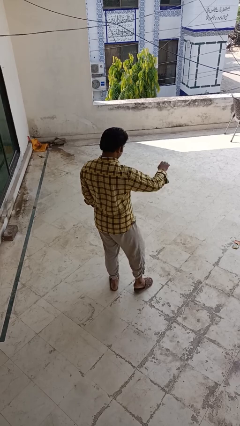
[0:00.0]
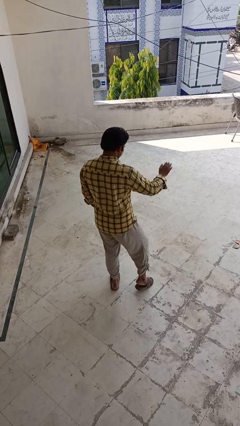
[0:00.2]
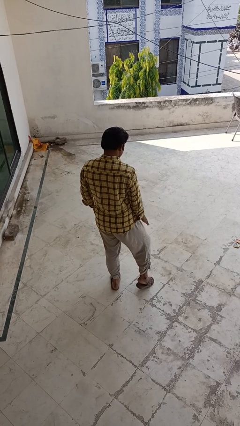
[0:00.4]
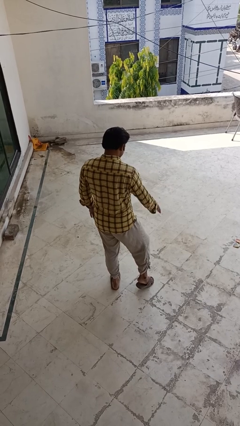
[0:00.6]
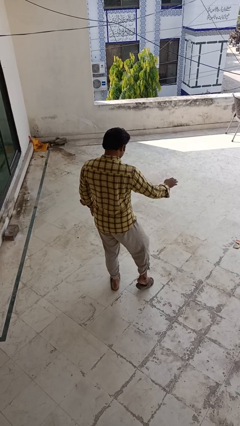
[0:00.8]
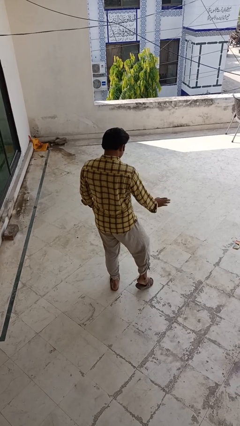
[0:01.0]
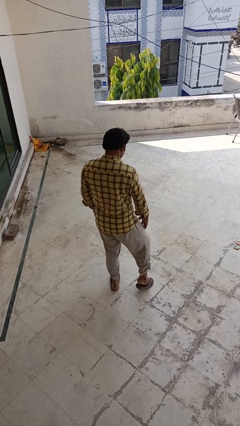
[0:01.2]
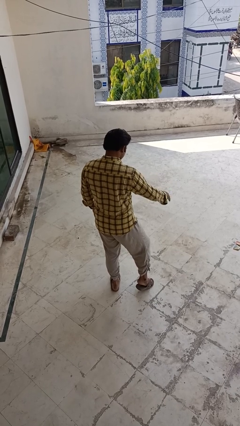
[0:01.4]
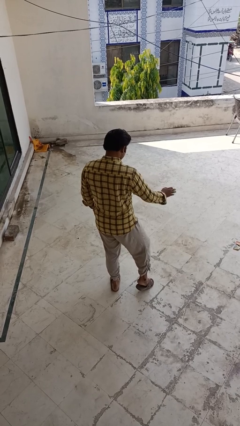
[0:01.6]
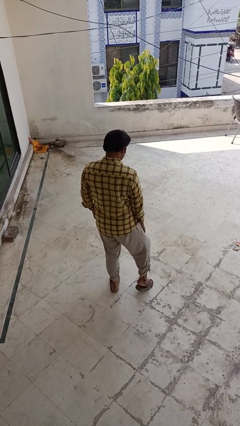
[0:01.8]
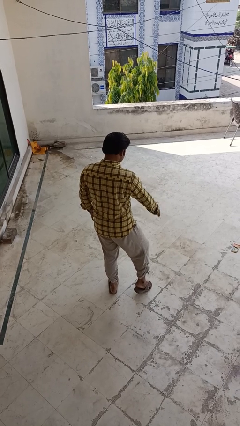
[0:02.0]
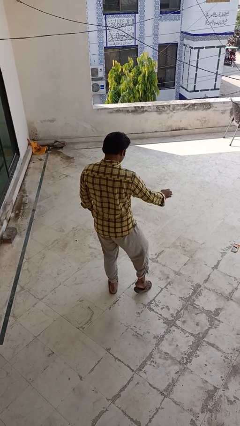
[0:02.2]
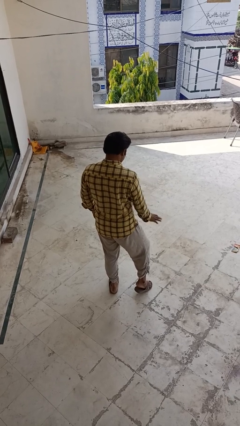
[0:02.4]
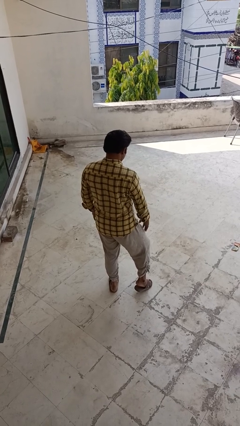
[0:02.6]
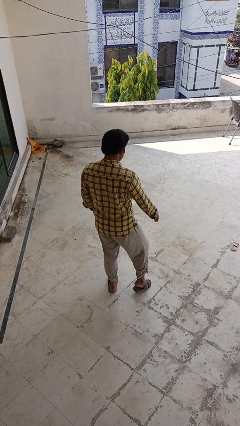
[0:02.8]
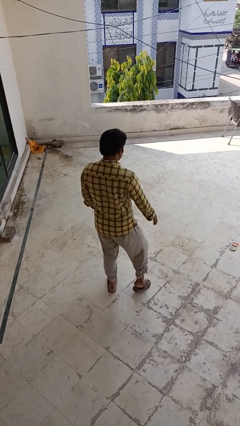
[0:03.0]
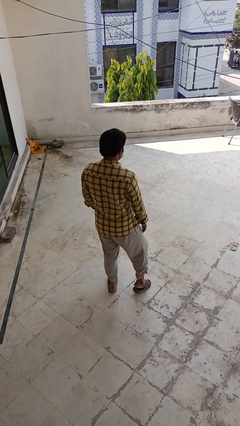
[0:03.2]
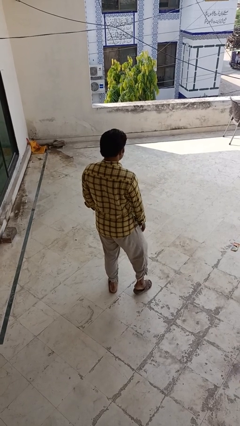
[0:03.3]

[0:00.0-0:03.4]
person slaps hands on thighs

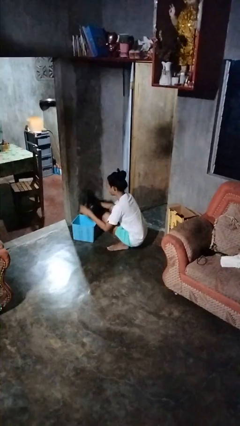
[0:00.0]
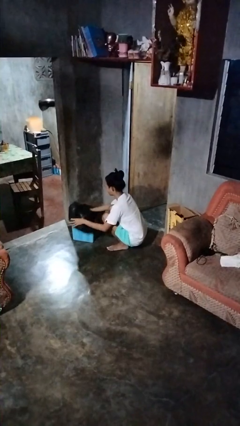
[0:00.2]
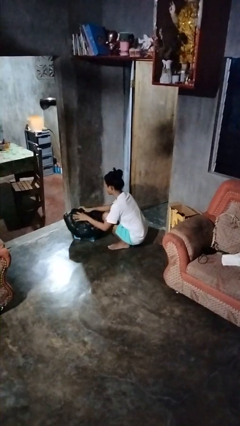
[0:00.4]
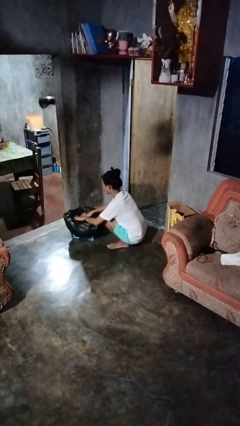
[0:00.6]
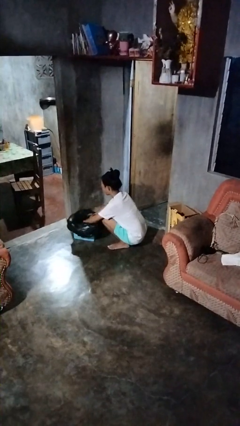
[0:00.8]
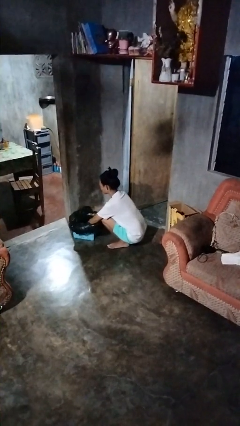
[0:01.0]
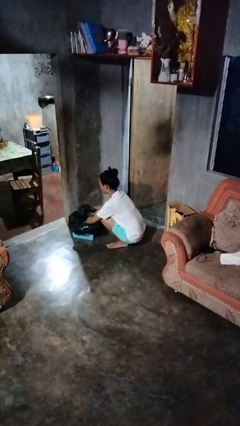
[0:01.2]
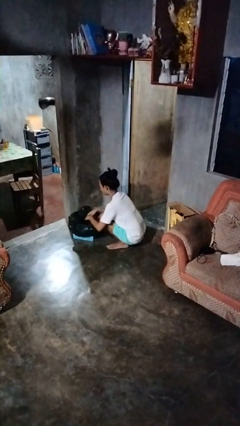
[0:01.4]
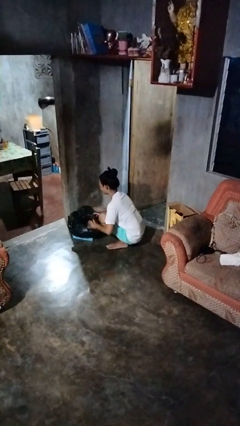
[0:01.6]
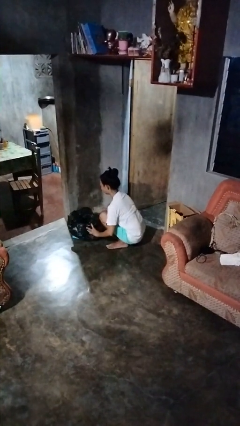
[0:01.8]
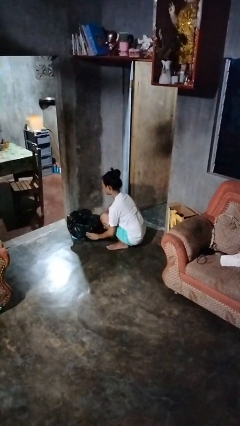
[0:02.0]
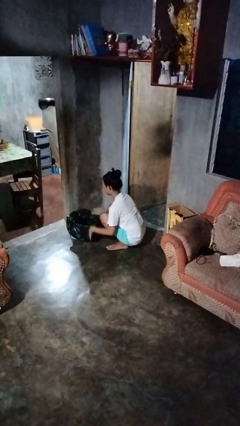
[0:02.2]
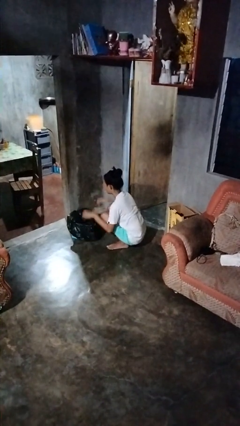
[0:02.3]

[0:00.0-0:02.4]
person inserts trashbag into trashcan

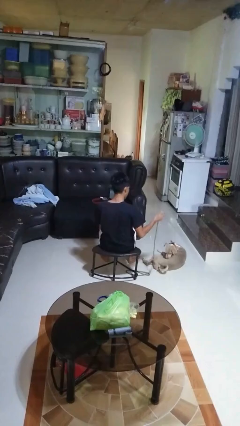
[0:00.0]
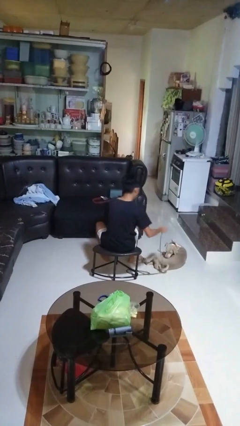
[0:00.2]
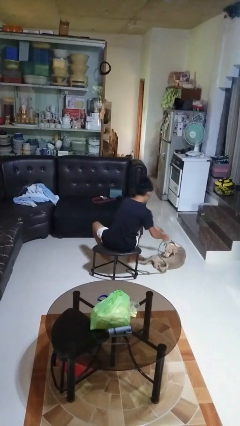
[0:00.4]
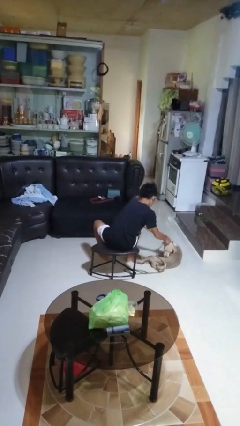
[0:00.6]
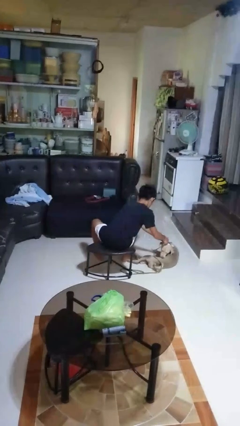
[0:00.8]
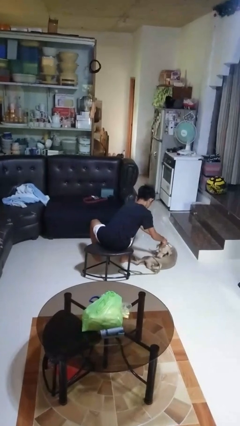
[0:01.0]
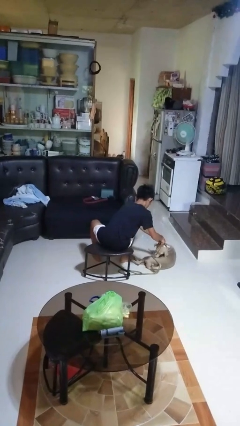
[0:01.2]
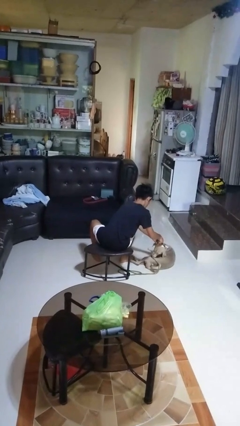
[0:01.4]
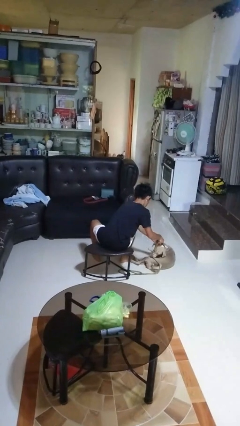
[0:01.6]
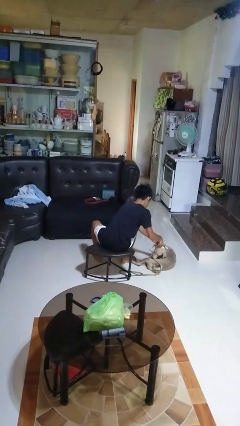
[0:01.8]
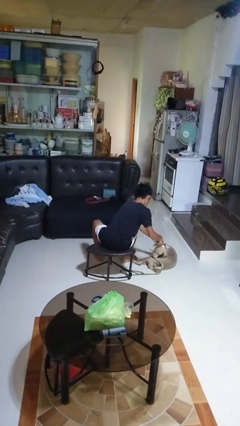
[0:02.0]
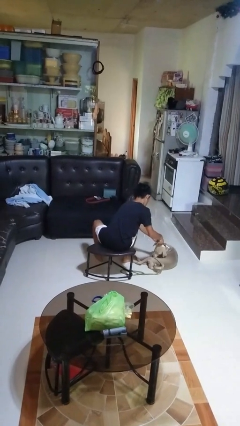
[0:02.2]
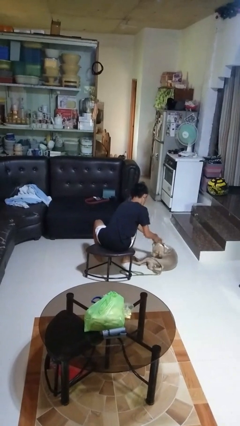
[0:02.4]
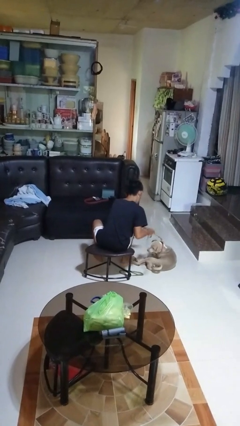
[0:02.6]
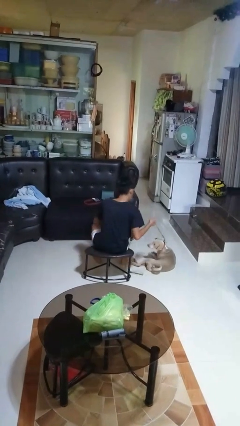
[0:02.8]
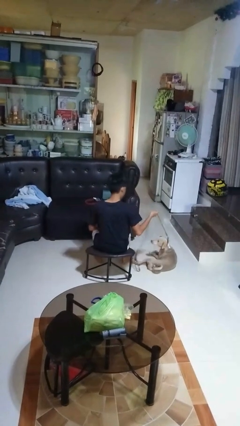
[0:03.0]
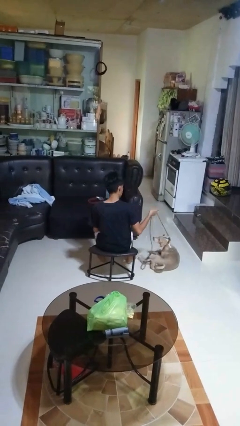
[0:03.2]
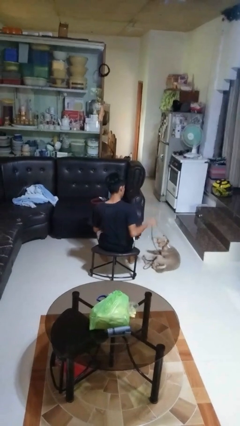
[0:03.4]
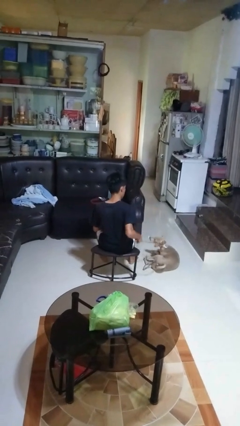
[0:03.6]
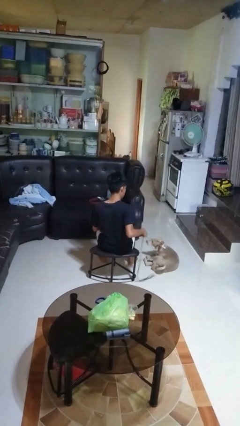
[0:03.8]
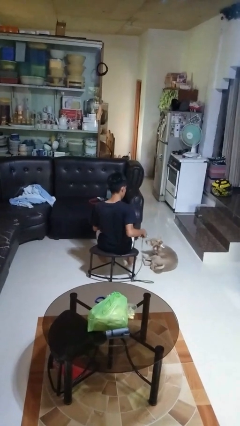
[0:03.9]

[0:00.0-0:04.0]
person attaches leash to dog

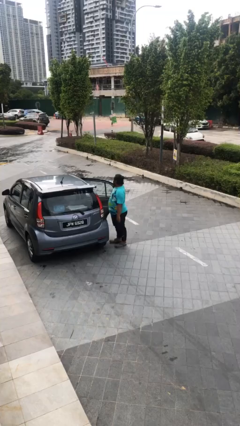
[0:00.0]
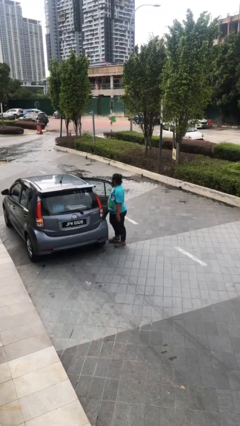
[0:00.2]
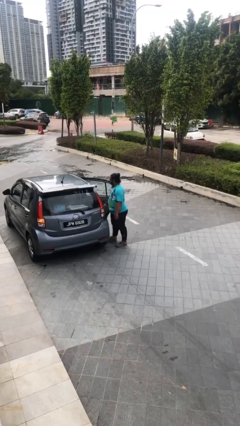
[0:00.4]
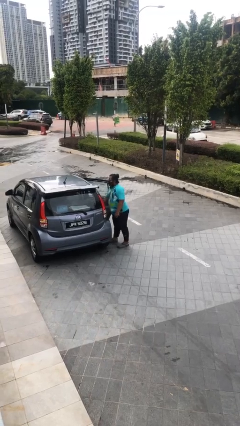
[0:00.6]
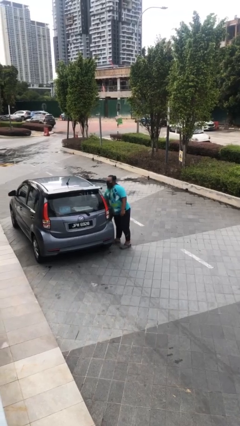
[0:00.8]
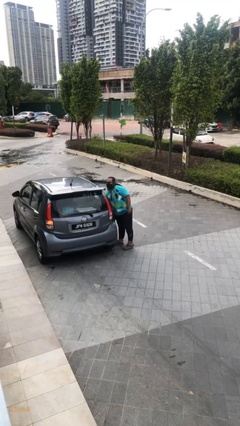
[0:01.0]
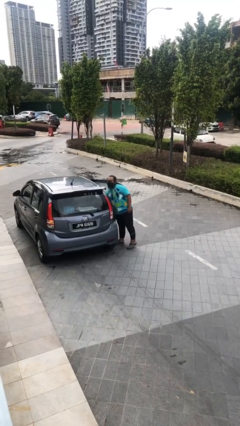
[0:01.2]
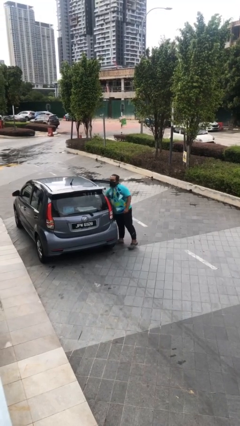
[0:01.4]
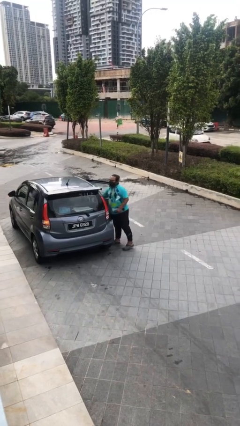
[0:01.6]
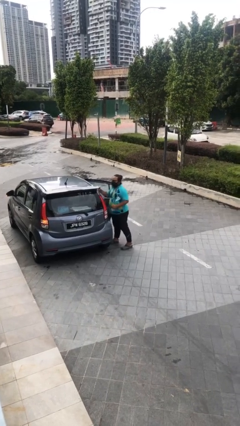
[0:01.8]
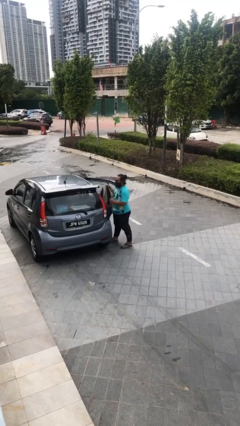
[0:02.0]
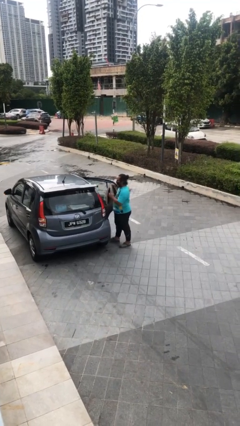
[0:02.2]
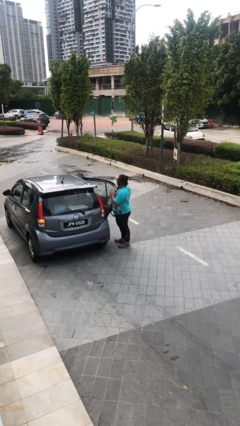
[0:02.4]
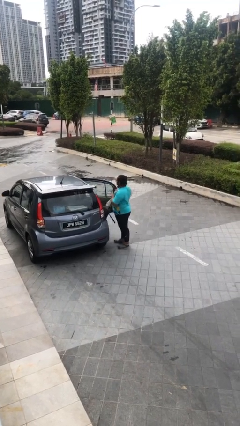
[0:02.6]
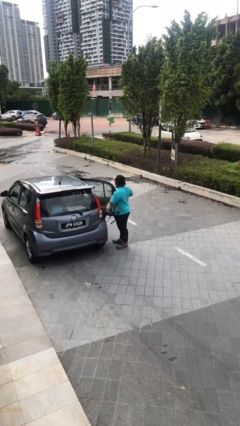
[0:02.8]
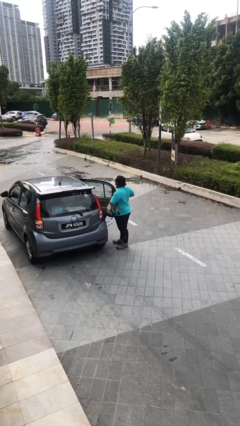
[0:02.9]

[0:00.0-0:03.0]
person unloads car

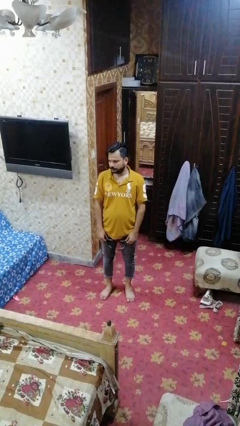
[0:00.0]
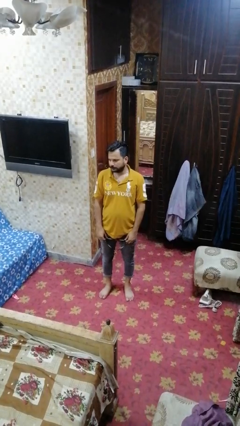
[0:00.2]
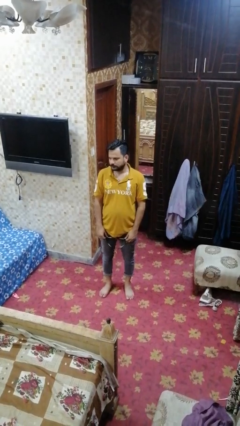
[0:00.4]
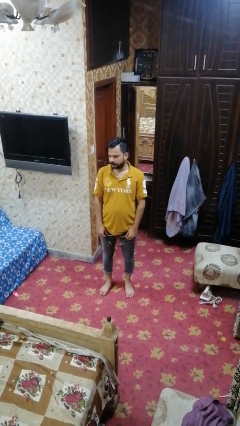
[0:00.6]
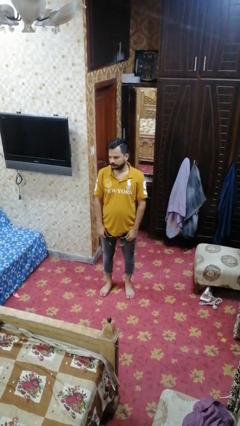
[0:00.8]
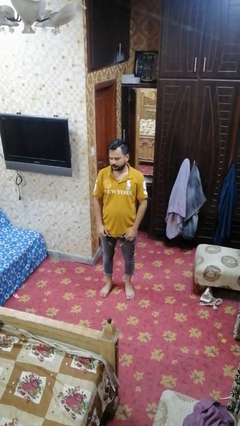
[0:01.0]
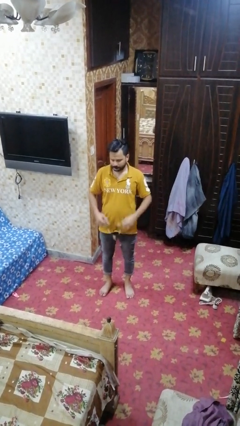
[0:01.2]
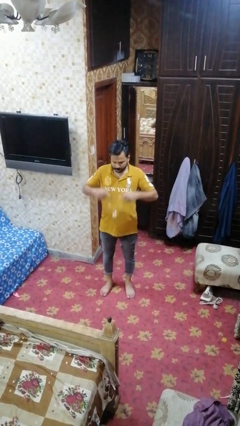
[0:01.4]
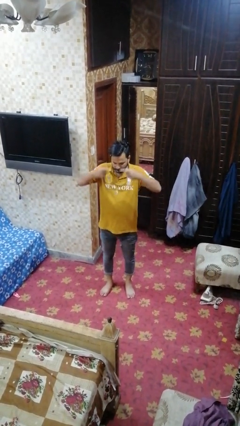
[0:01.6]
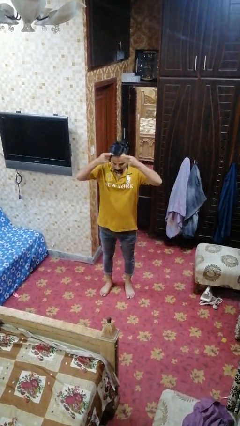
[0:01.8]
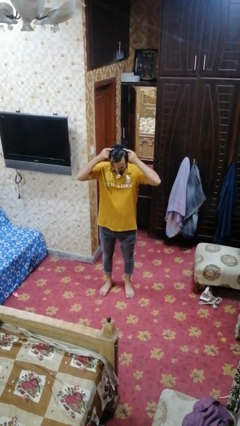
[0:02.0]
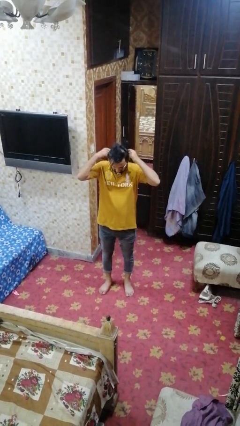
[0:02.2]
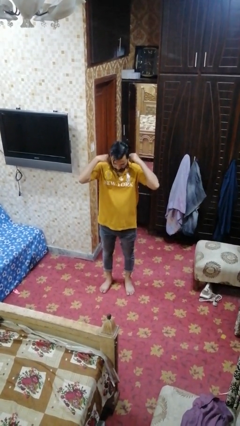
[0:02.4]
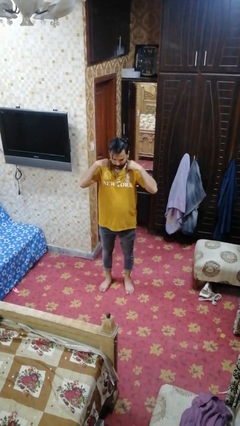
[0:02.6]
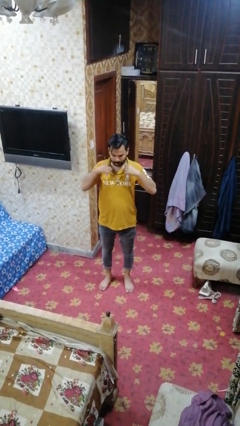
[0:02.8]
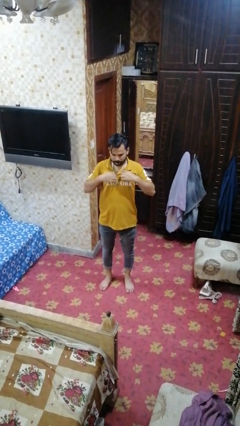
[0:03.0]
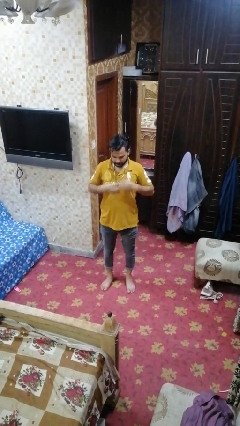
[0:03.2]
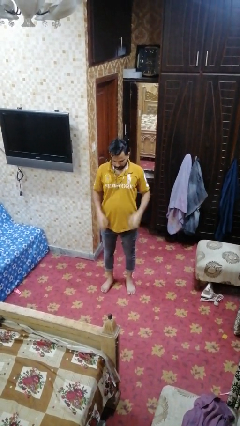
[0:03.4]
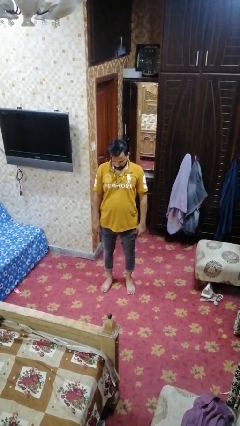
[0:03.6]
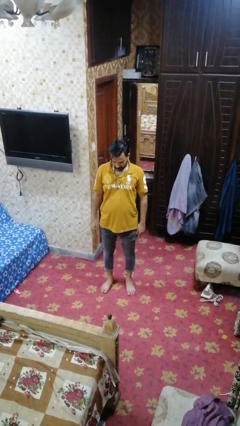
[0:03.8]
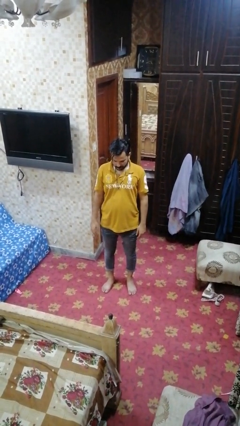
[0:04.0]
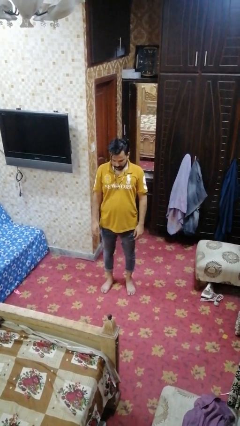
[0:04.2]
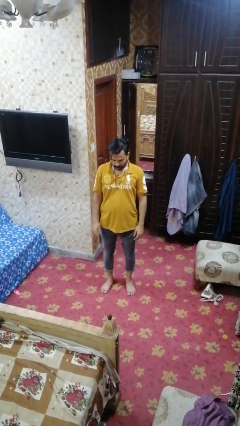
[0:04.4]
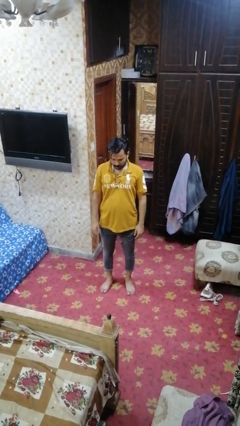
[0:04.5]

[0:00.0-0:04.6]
person puts on necklace
